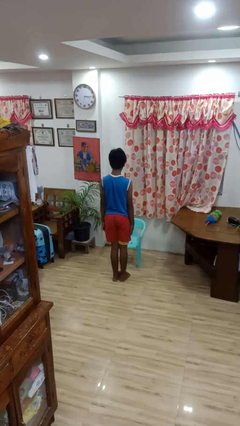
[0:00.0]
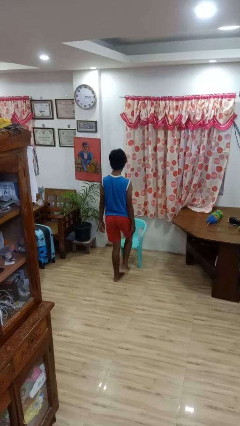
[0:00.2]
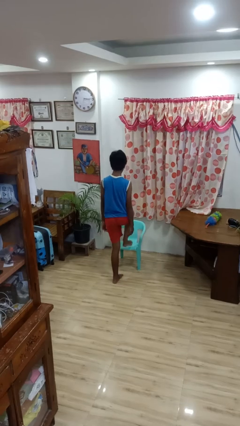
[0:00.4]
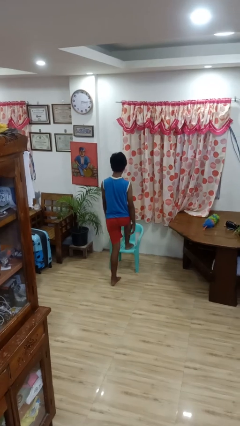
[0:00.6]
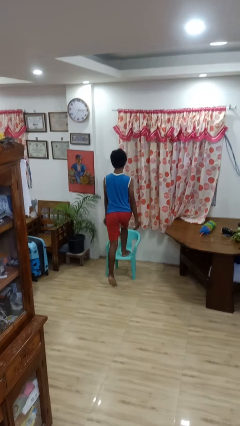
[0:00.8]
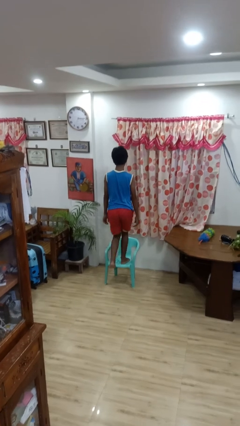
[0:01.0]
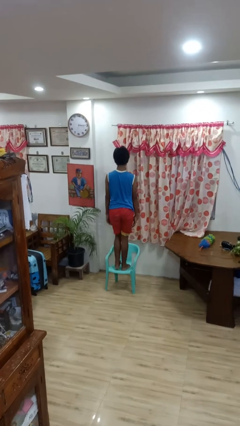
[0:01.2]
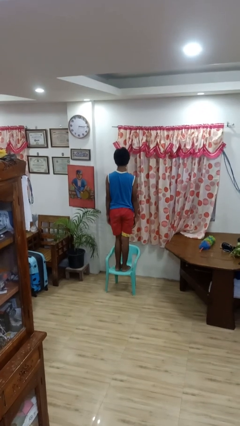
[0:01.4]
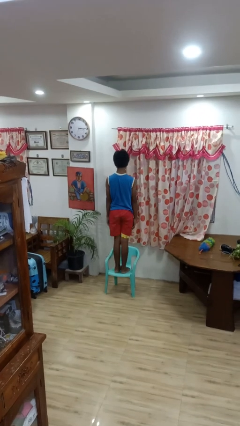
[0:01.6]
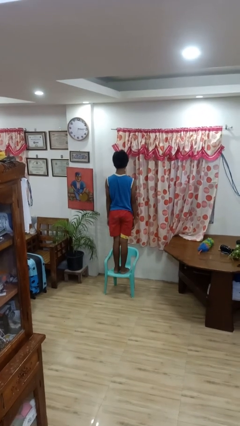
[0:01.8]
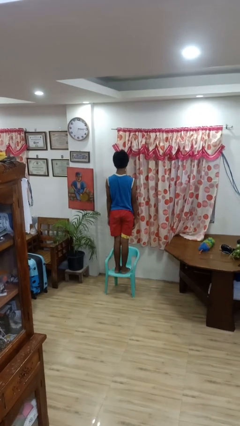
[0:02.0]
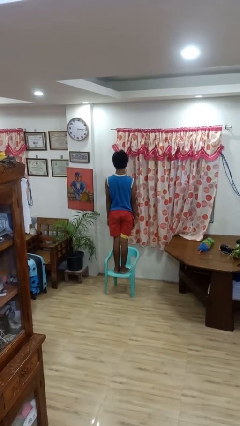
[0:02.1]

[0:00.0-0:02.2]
person climbs on chair

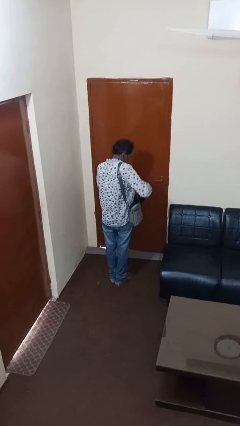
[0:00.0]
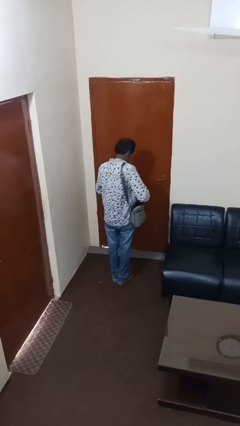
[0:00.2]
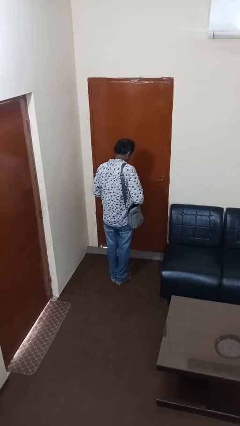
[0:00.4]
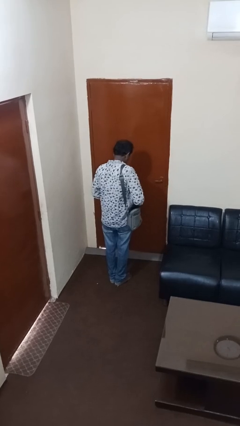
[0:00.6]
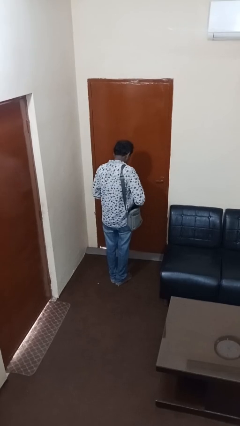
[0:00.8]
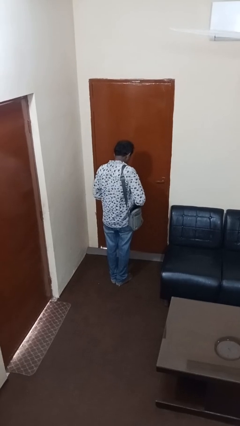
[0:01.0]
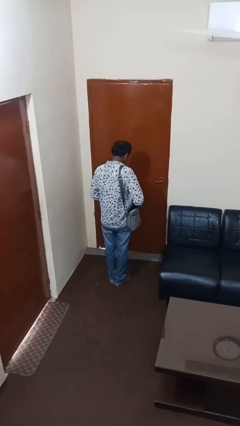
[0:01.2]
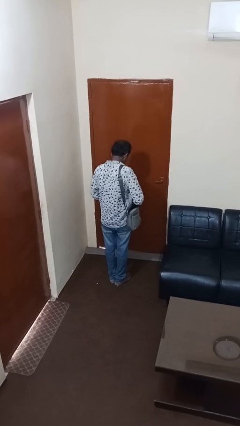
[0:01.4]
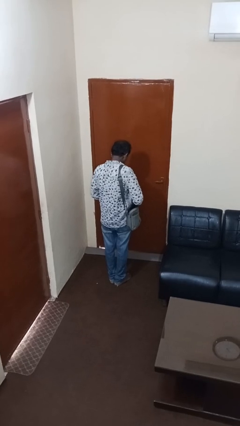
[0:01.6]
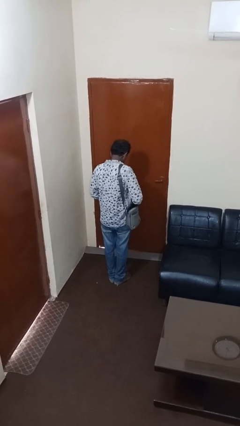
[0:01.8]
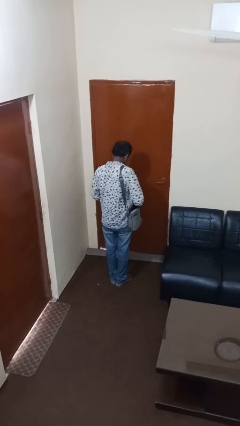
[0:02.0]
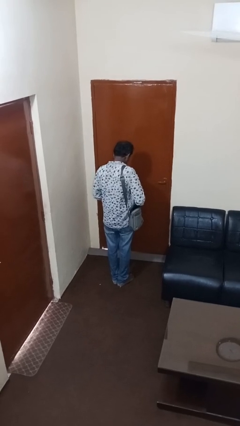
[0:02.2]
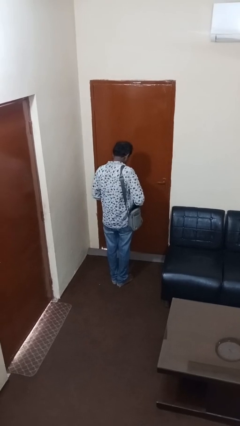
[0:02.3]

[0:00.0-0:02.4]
person takes object from purse

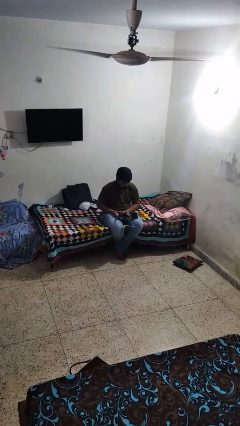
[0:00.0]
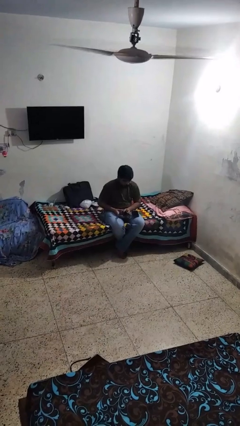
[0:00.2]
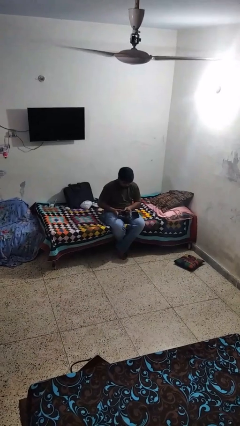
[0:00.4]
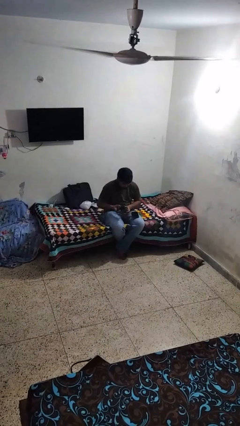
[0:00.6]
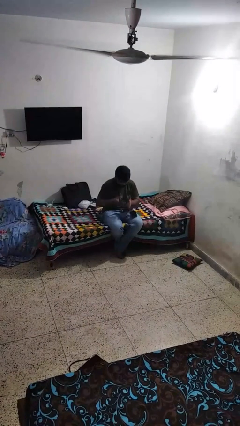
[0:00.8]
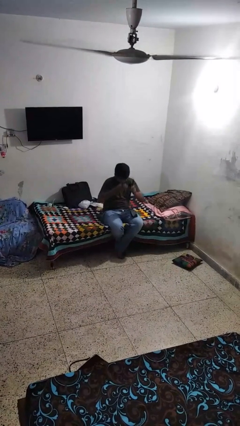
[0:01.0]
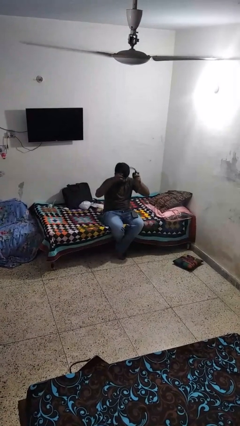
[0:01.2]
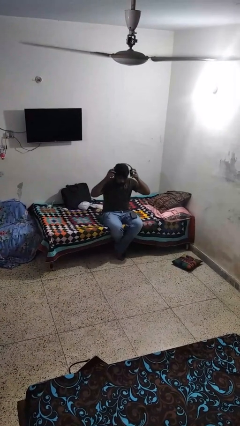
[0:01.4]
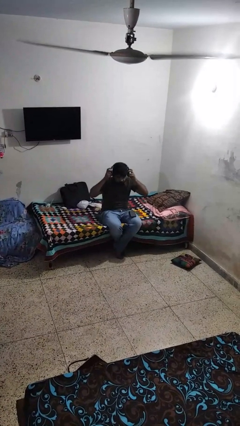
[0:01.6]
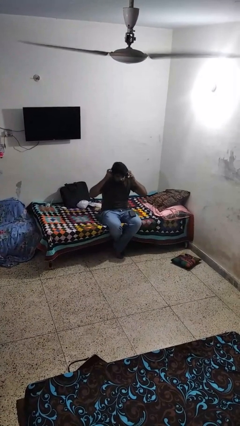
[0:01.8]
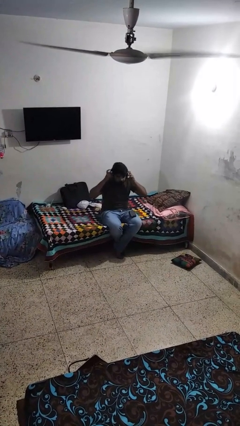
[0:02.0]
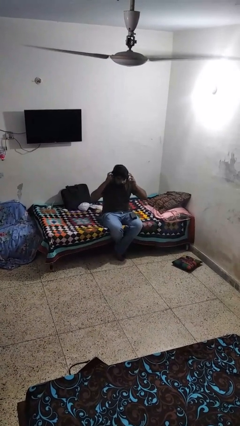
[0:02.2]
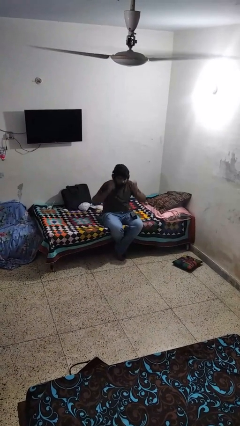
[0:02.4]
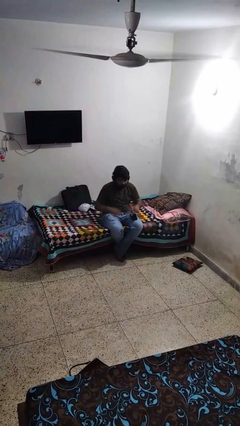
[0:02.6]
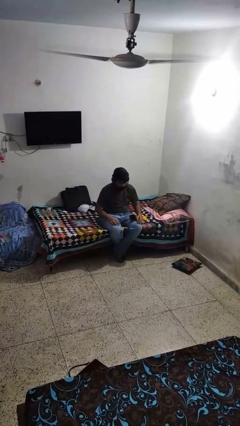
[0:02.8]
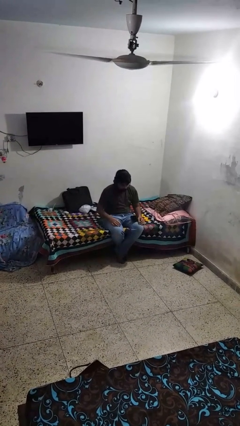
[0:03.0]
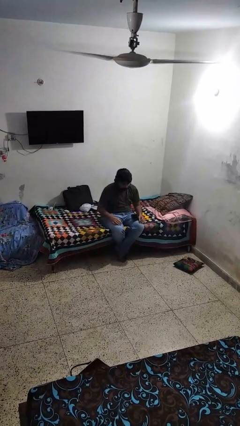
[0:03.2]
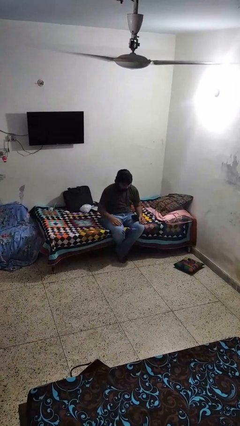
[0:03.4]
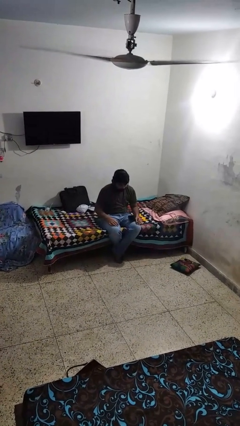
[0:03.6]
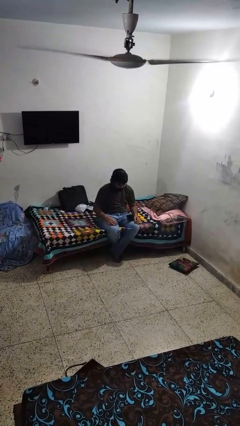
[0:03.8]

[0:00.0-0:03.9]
person puts on headphones

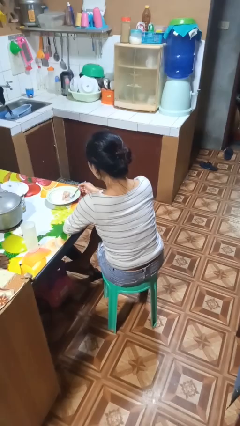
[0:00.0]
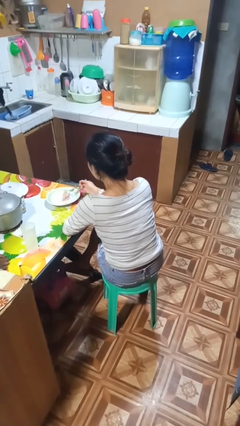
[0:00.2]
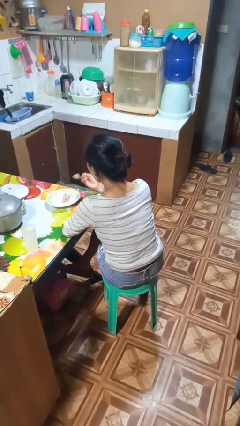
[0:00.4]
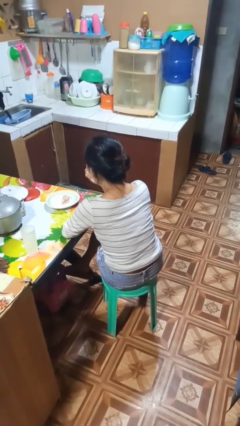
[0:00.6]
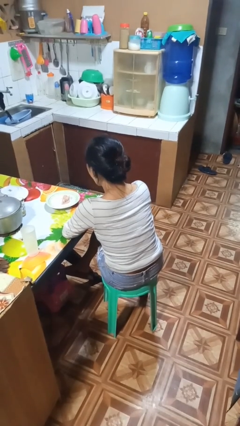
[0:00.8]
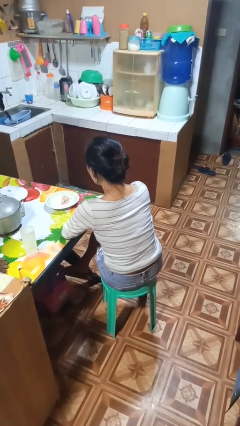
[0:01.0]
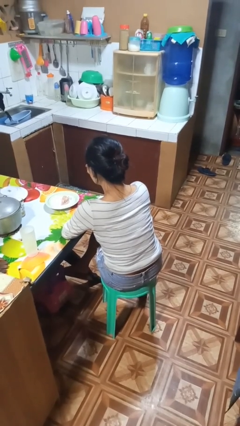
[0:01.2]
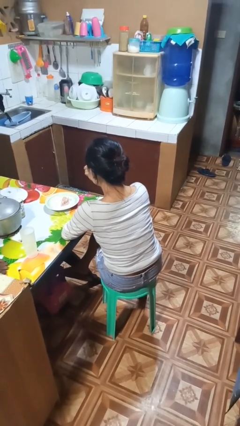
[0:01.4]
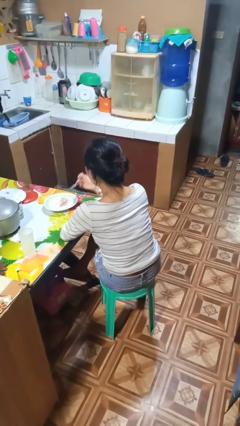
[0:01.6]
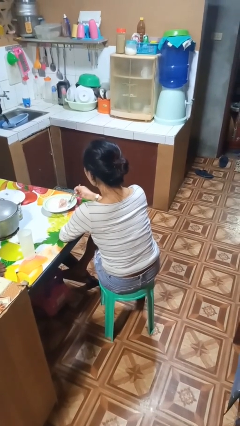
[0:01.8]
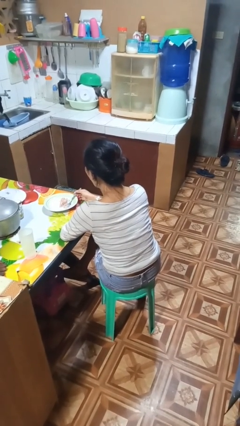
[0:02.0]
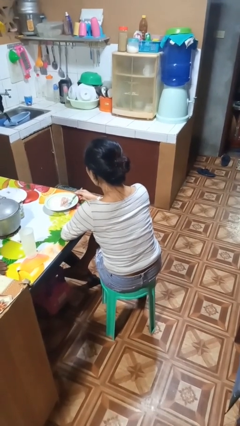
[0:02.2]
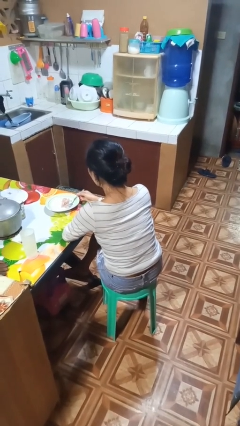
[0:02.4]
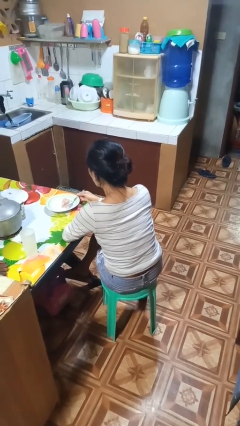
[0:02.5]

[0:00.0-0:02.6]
person eats with utensil

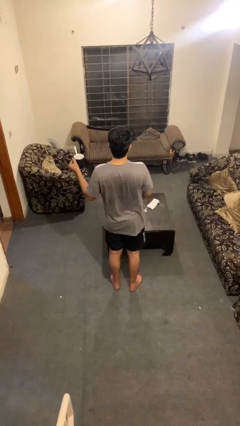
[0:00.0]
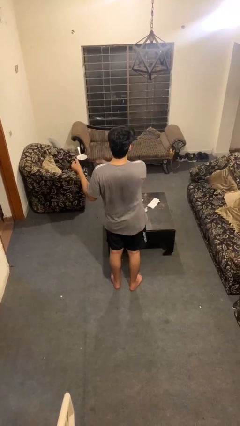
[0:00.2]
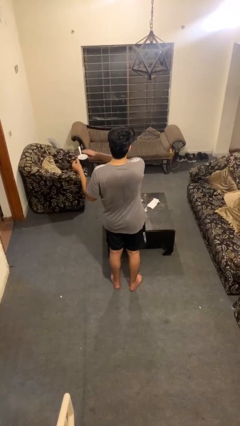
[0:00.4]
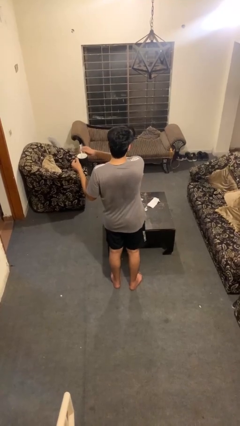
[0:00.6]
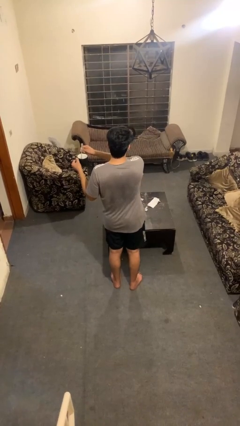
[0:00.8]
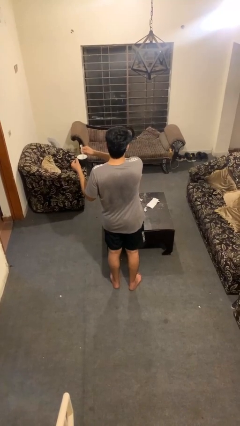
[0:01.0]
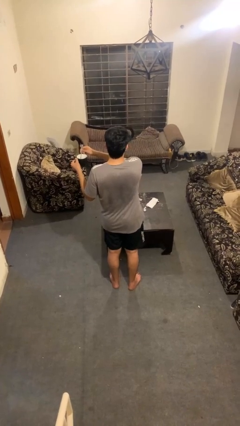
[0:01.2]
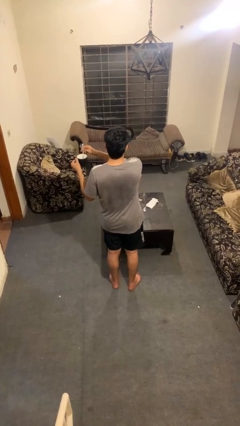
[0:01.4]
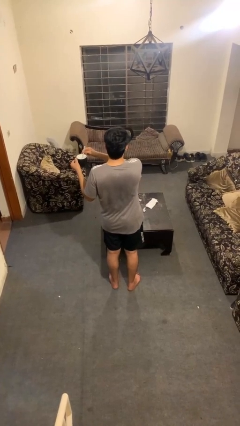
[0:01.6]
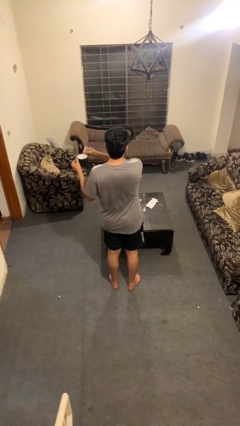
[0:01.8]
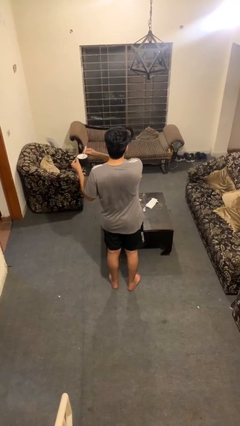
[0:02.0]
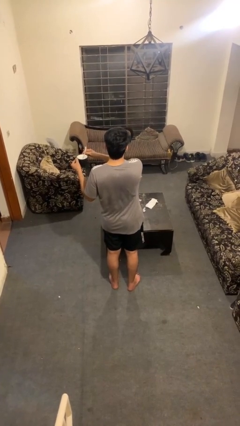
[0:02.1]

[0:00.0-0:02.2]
person stirs mug

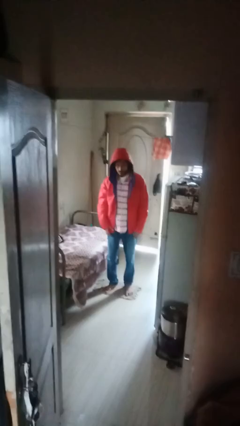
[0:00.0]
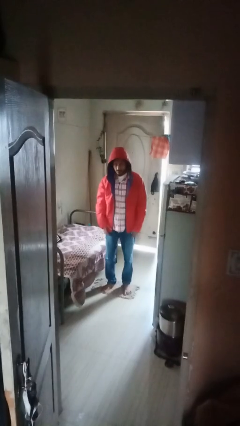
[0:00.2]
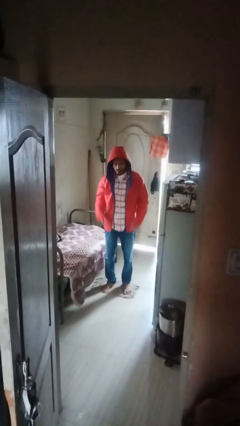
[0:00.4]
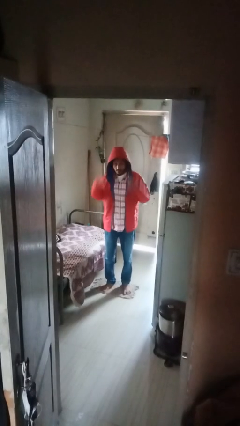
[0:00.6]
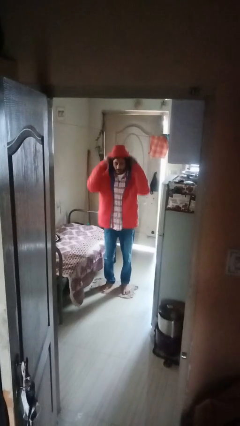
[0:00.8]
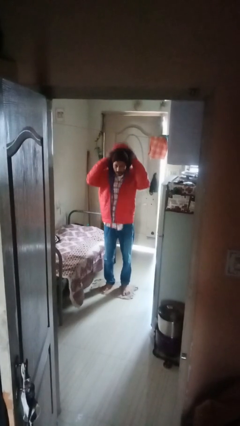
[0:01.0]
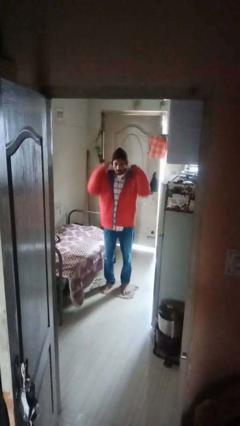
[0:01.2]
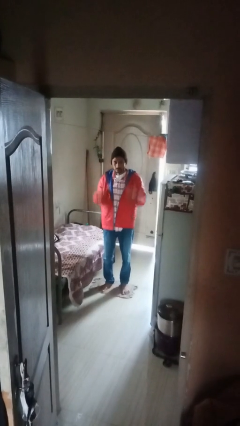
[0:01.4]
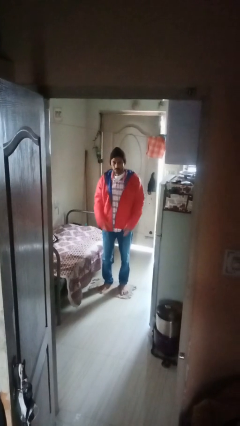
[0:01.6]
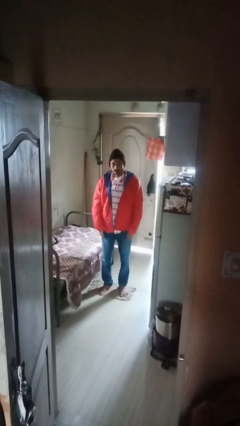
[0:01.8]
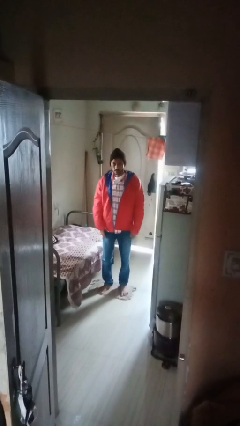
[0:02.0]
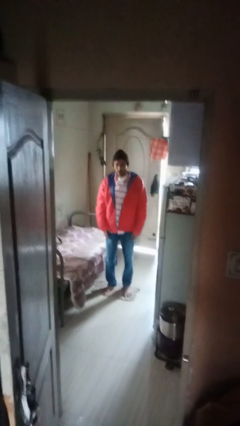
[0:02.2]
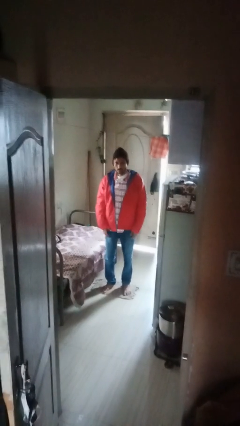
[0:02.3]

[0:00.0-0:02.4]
person takes off hoodie

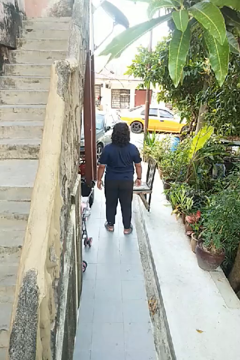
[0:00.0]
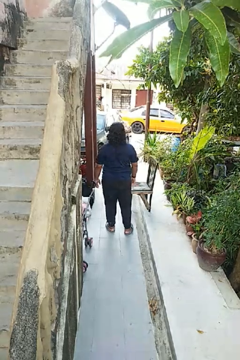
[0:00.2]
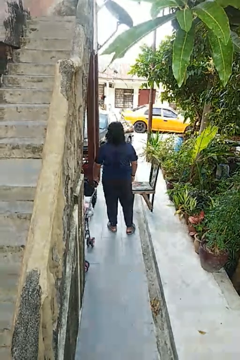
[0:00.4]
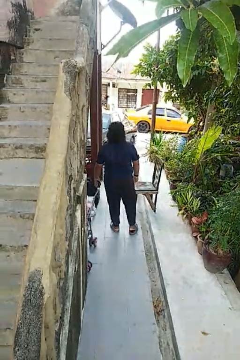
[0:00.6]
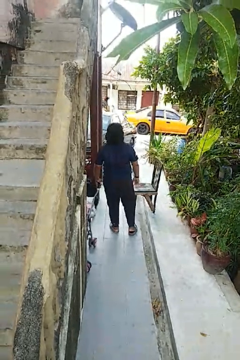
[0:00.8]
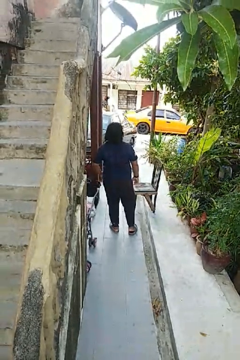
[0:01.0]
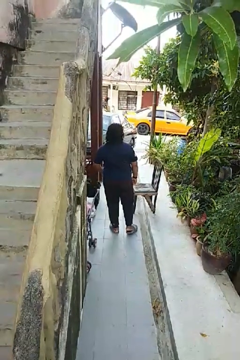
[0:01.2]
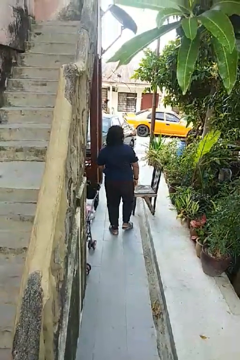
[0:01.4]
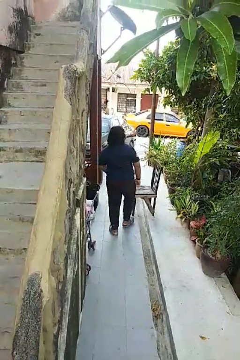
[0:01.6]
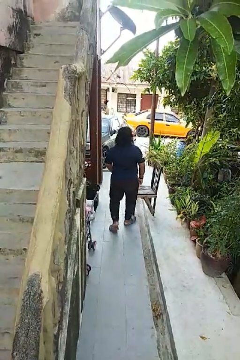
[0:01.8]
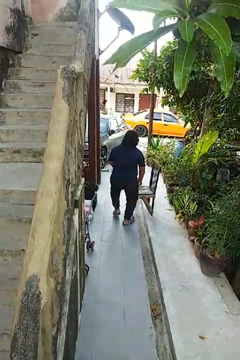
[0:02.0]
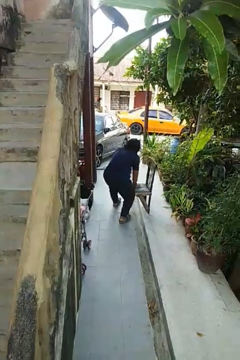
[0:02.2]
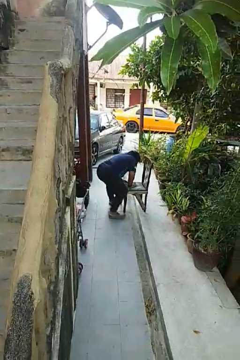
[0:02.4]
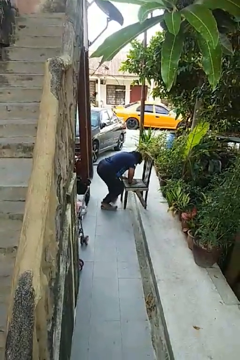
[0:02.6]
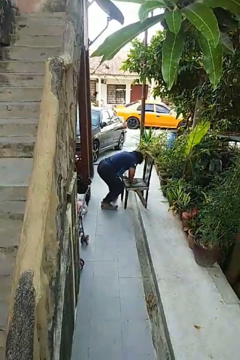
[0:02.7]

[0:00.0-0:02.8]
person trips on object on floor
